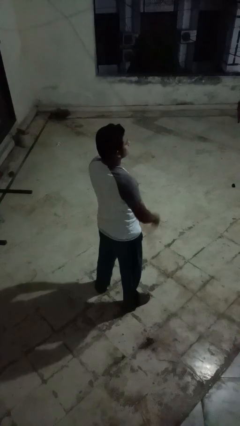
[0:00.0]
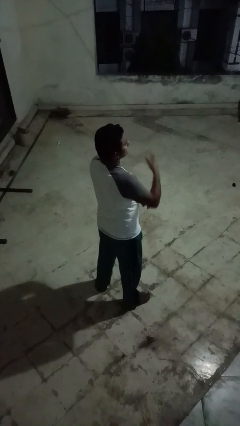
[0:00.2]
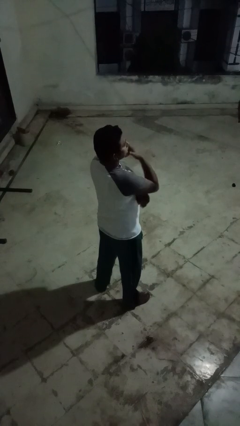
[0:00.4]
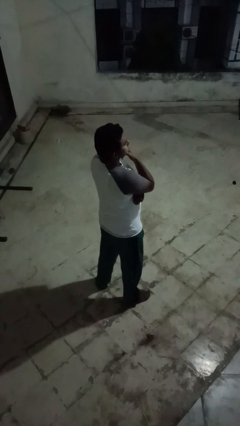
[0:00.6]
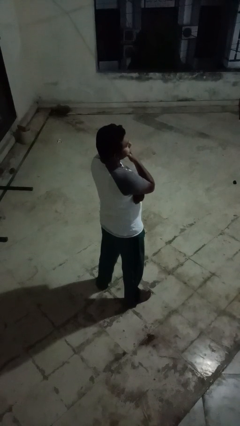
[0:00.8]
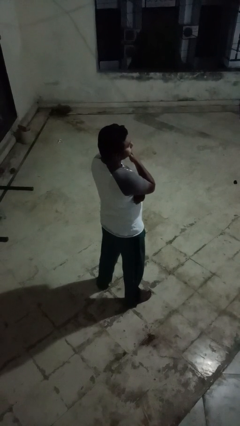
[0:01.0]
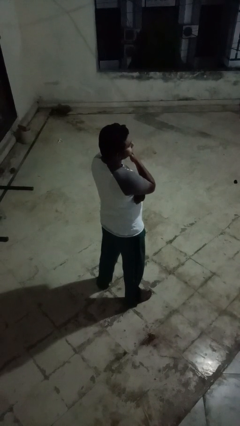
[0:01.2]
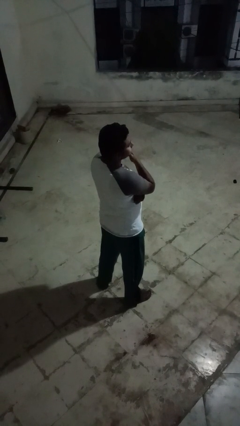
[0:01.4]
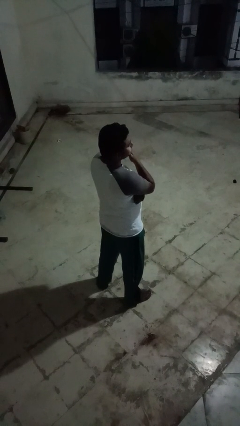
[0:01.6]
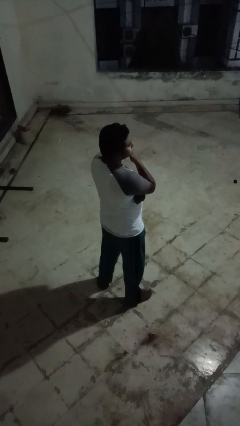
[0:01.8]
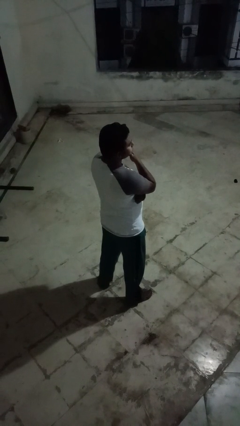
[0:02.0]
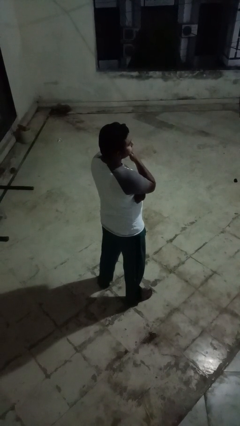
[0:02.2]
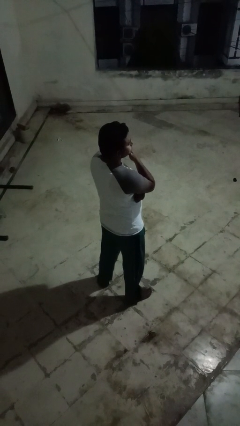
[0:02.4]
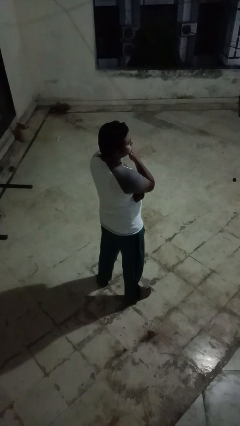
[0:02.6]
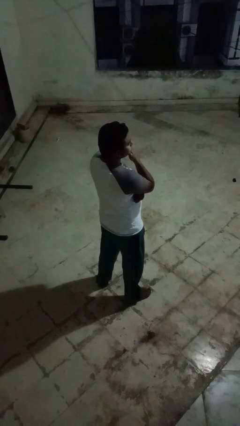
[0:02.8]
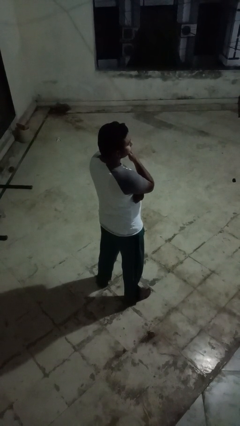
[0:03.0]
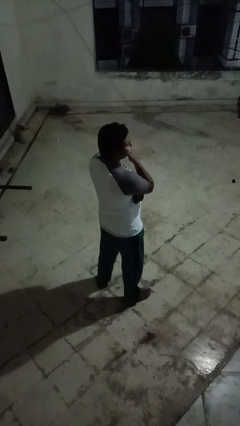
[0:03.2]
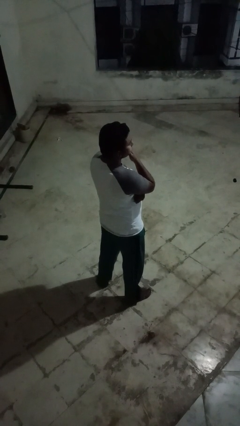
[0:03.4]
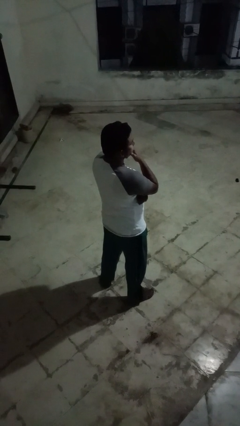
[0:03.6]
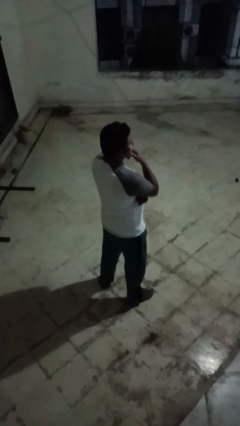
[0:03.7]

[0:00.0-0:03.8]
person strokes chin

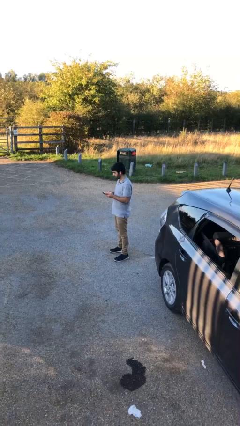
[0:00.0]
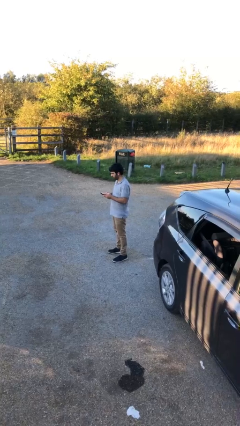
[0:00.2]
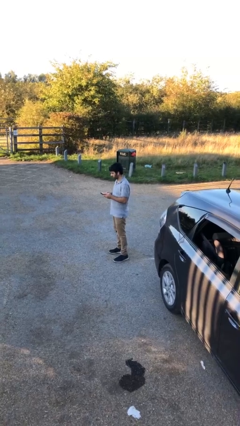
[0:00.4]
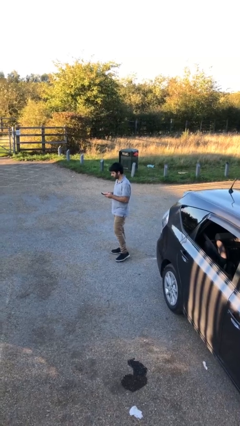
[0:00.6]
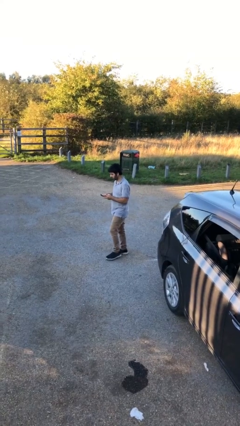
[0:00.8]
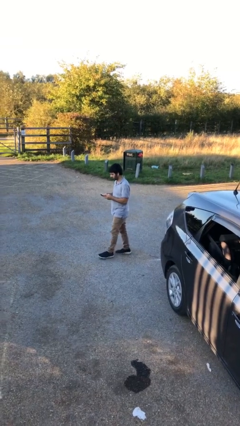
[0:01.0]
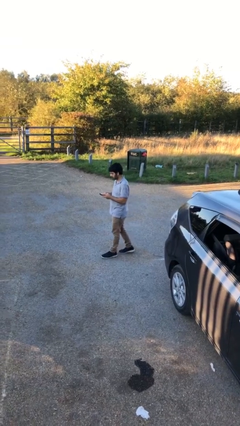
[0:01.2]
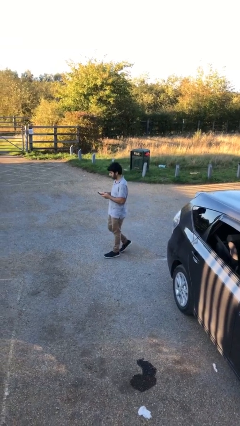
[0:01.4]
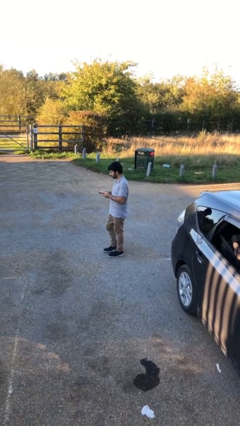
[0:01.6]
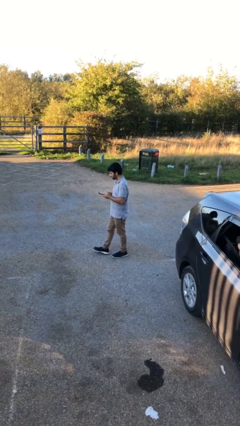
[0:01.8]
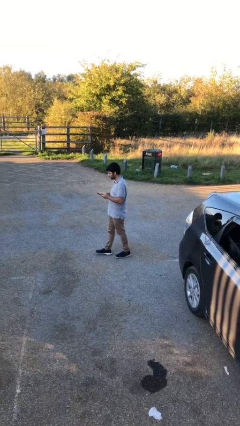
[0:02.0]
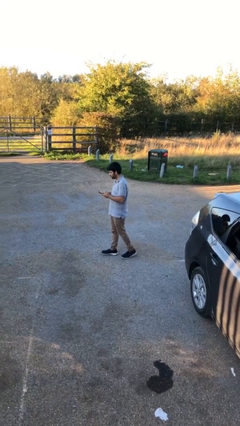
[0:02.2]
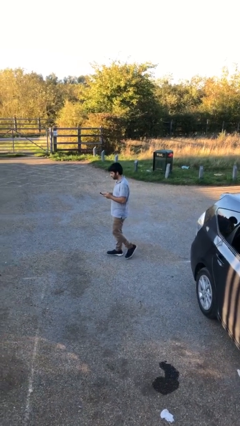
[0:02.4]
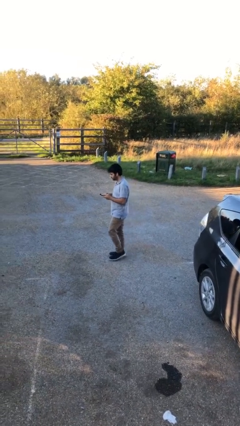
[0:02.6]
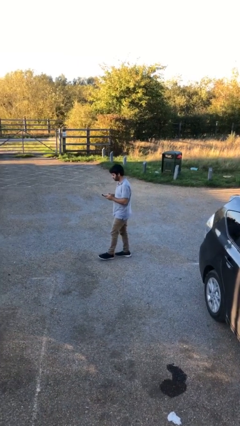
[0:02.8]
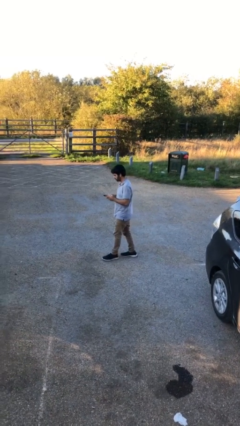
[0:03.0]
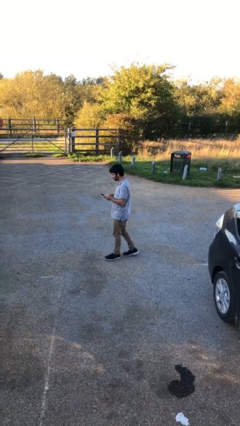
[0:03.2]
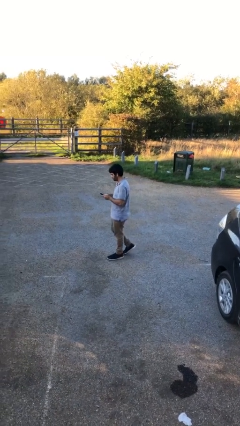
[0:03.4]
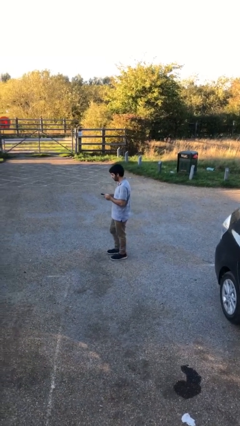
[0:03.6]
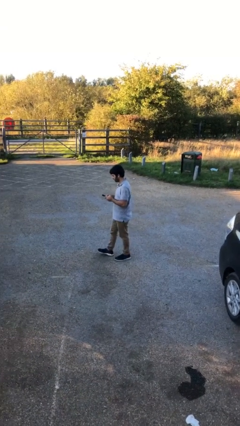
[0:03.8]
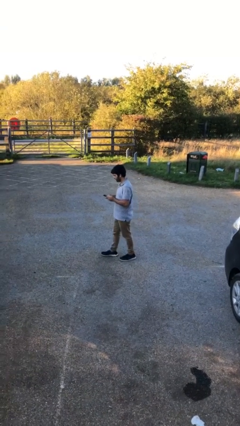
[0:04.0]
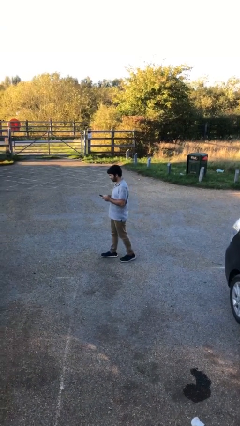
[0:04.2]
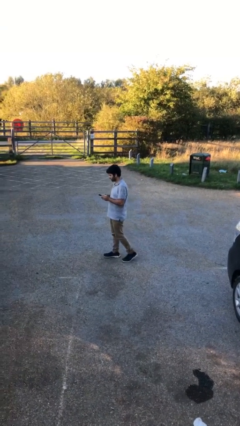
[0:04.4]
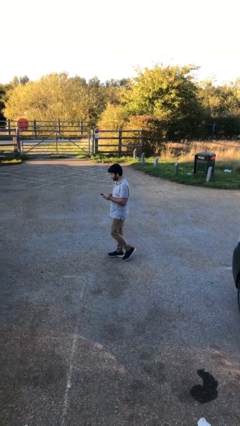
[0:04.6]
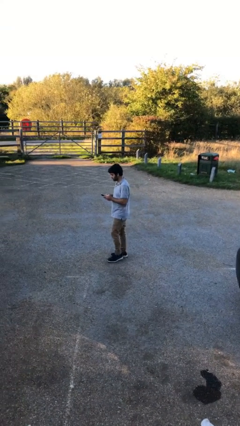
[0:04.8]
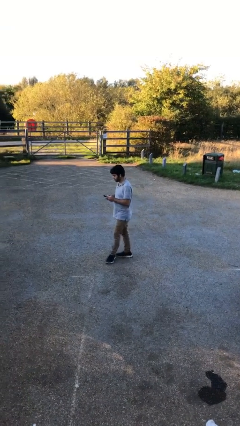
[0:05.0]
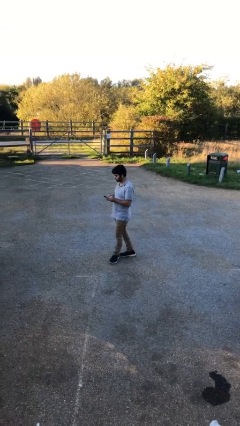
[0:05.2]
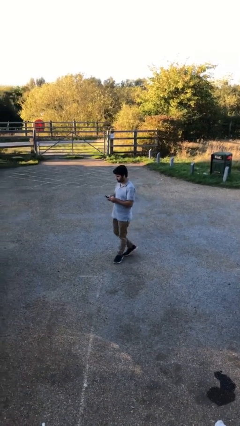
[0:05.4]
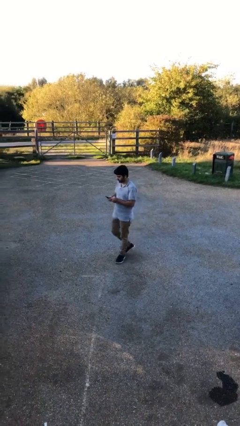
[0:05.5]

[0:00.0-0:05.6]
person texts on phone

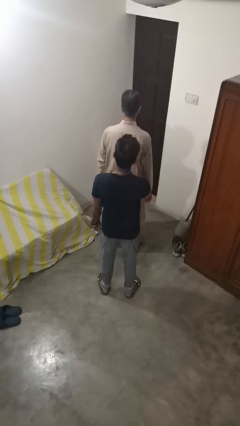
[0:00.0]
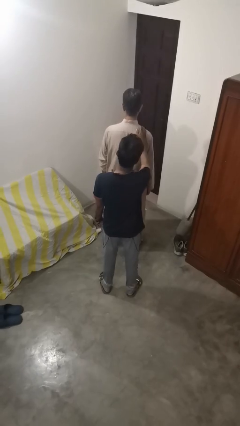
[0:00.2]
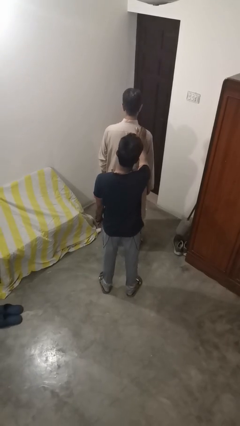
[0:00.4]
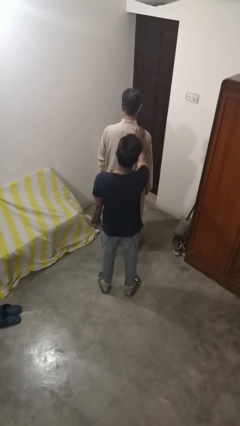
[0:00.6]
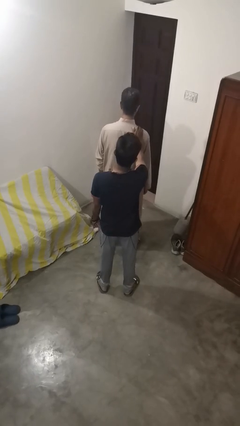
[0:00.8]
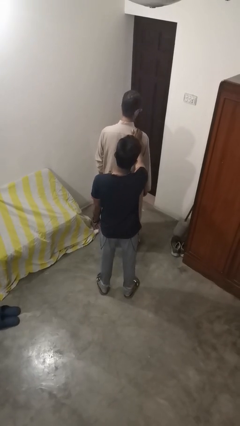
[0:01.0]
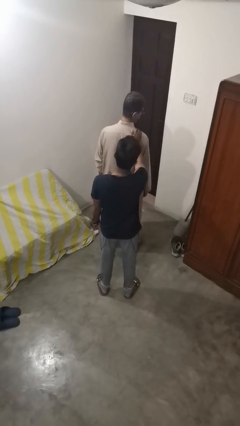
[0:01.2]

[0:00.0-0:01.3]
person grabs person by shoulder

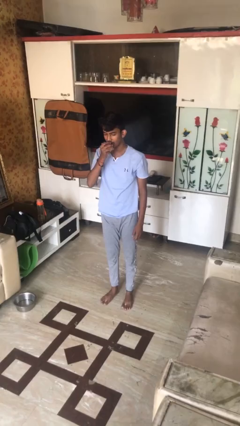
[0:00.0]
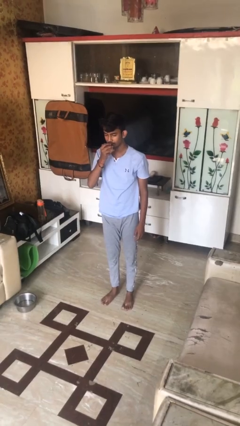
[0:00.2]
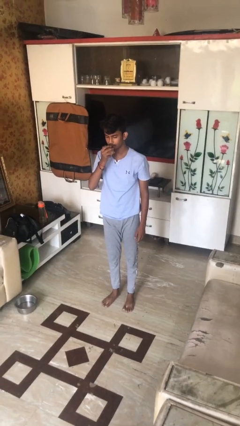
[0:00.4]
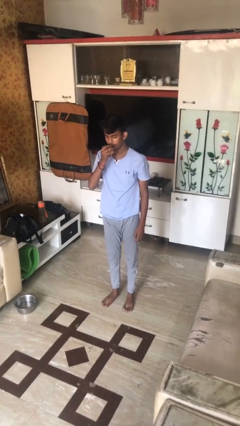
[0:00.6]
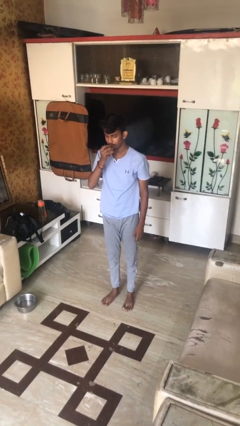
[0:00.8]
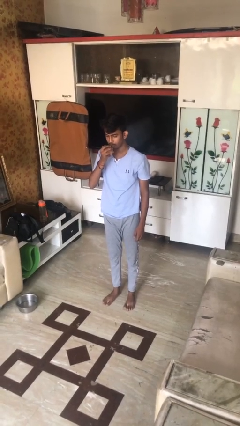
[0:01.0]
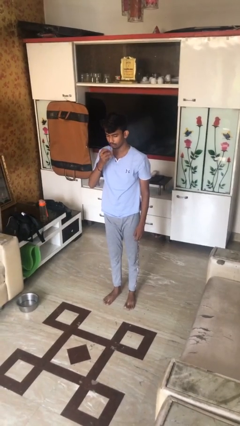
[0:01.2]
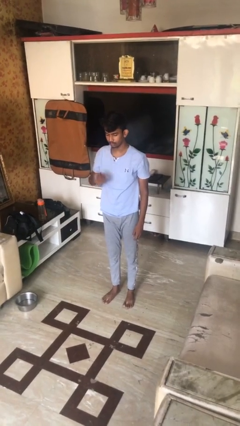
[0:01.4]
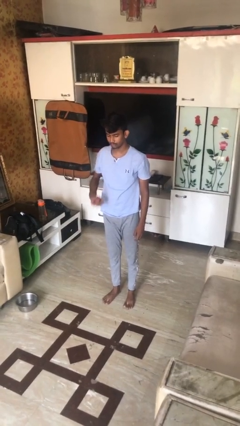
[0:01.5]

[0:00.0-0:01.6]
person eats apple

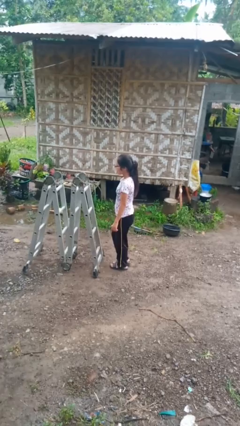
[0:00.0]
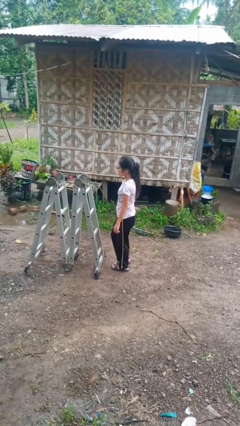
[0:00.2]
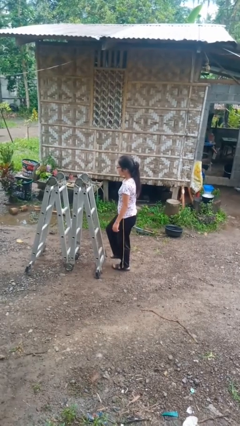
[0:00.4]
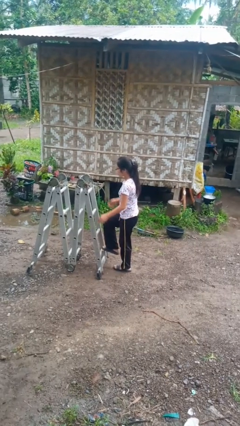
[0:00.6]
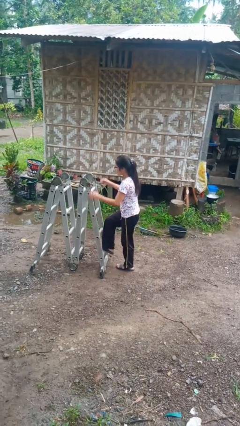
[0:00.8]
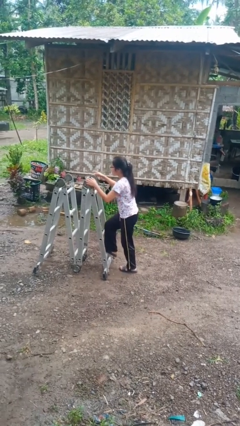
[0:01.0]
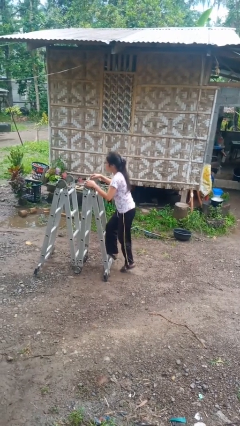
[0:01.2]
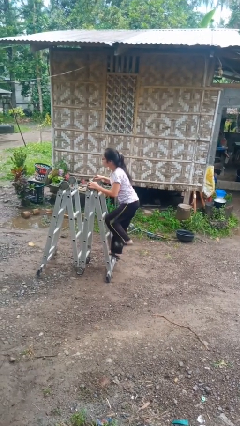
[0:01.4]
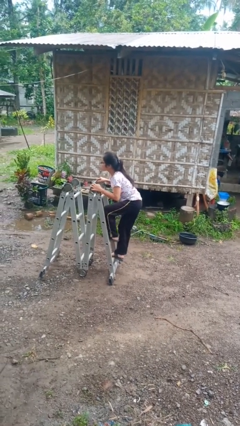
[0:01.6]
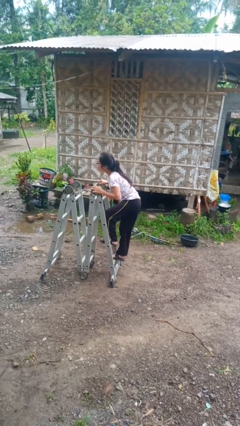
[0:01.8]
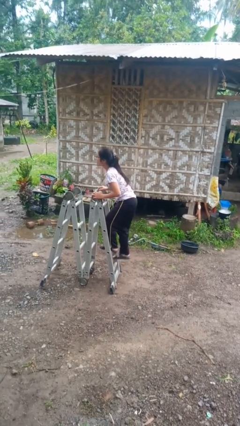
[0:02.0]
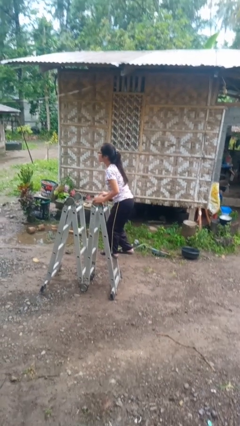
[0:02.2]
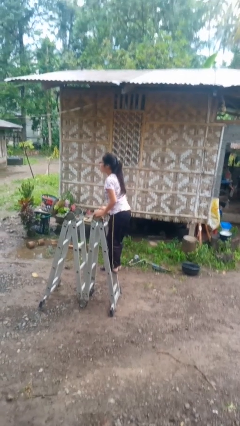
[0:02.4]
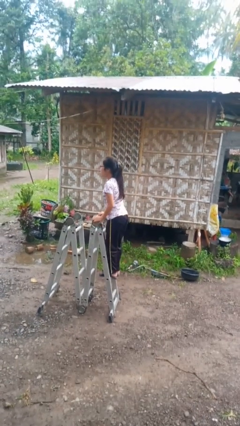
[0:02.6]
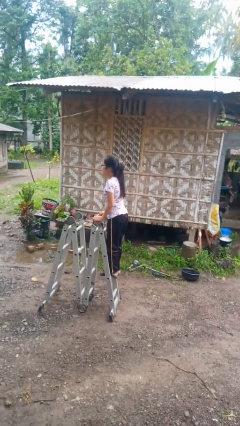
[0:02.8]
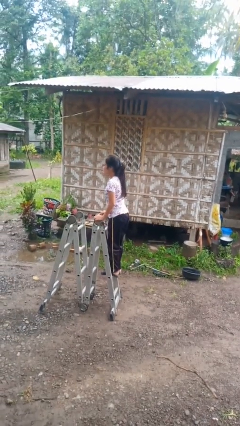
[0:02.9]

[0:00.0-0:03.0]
person climbs up ladder

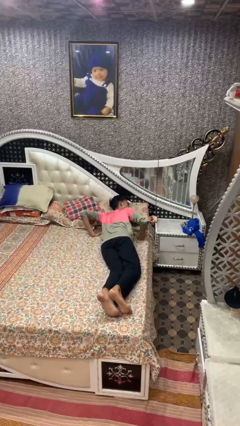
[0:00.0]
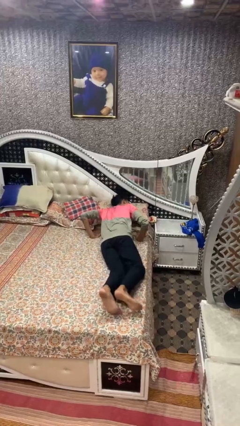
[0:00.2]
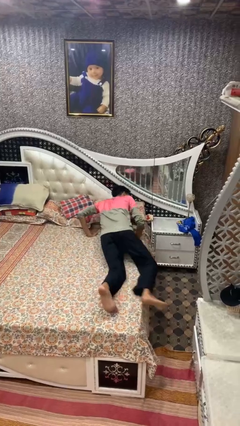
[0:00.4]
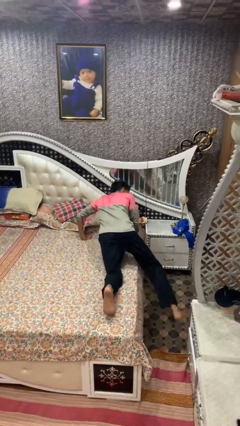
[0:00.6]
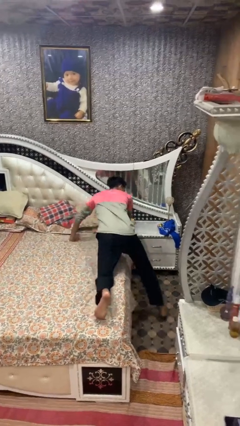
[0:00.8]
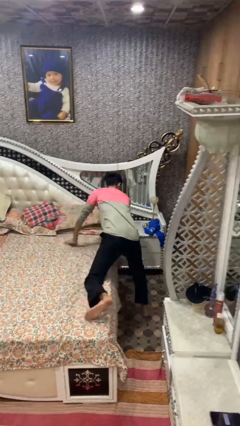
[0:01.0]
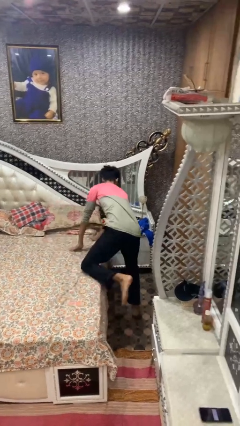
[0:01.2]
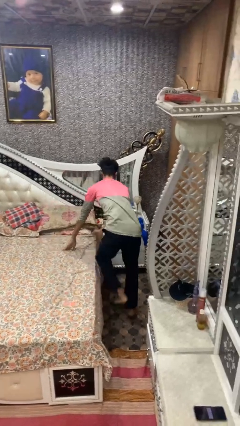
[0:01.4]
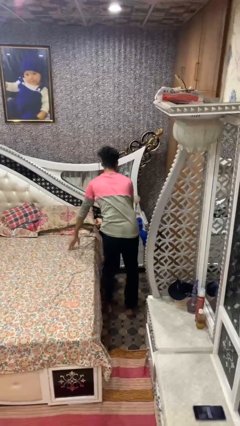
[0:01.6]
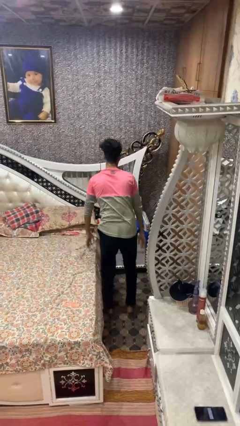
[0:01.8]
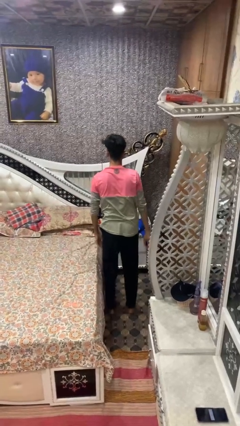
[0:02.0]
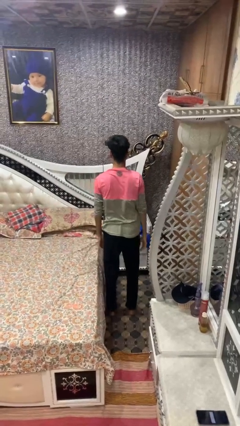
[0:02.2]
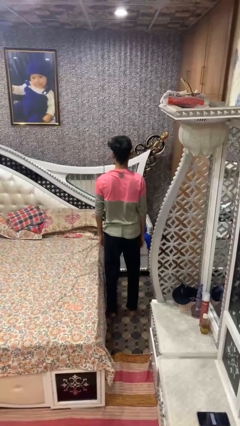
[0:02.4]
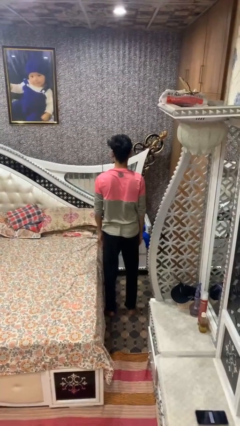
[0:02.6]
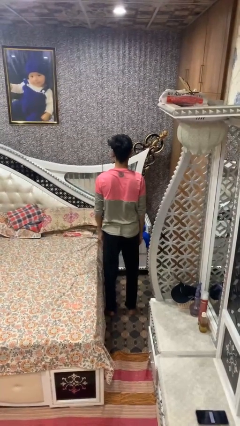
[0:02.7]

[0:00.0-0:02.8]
person stands up
